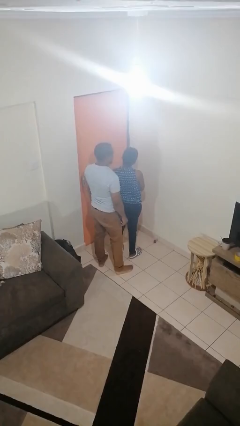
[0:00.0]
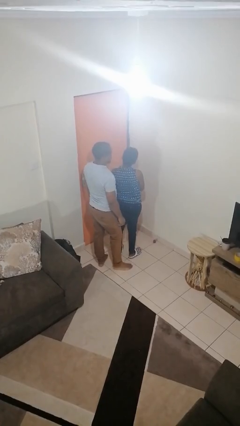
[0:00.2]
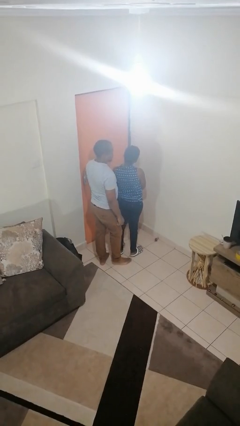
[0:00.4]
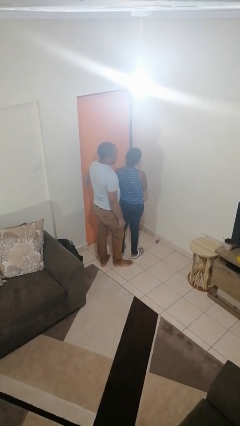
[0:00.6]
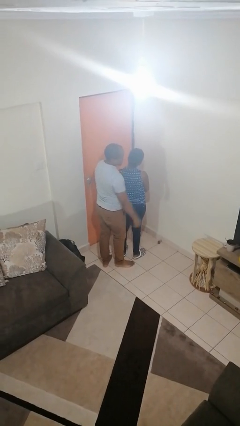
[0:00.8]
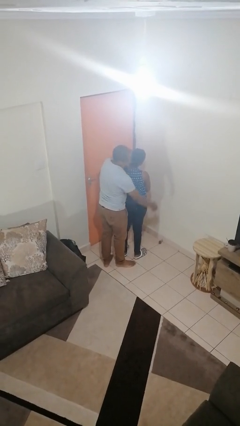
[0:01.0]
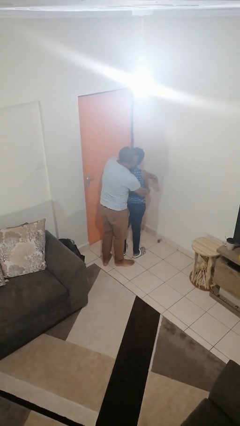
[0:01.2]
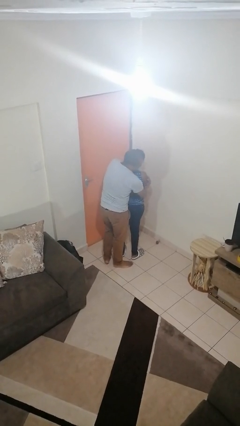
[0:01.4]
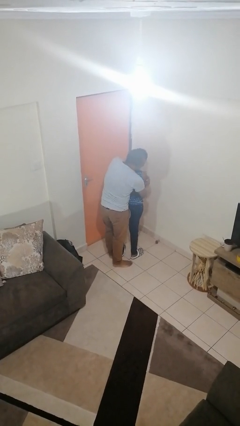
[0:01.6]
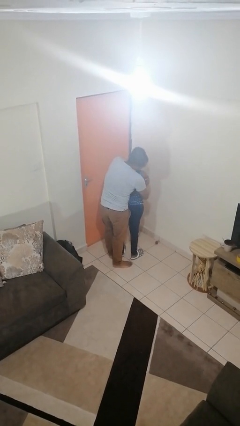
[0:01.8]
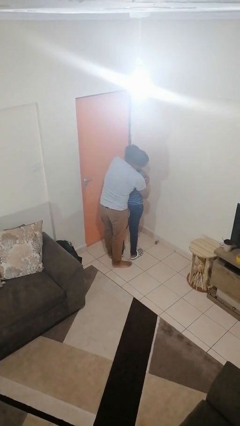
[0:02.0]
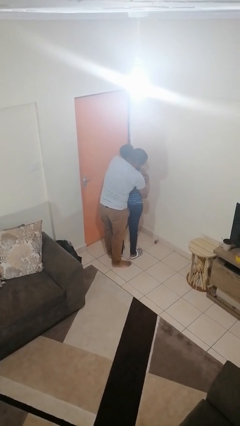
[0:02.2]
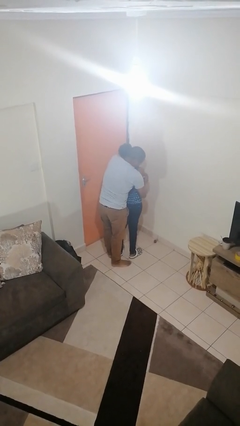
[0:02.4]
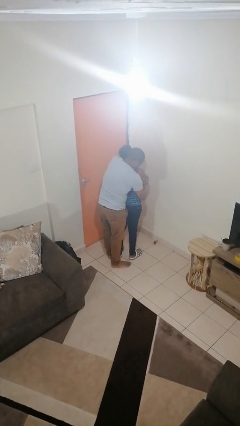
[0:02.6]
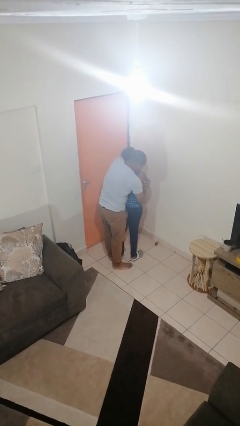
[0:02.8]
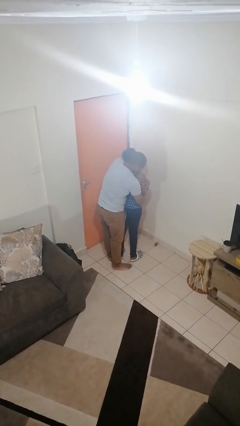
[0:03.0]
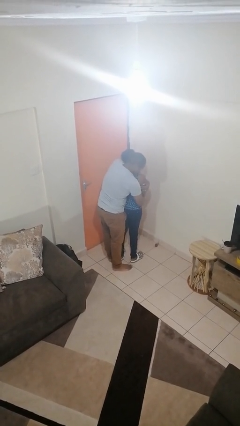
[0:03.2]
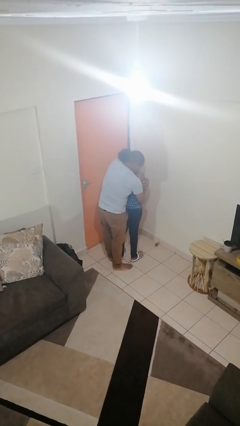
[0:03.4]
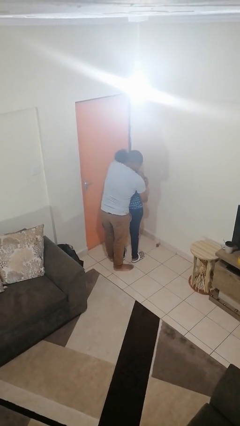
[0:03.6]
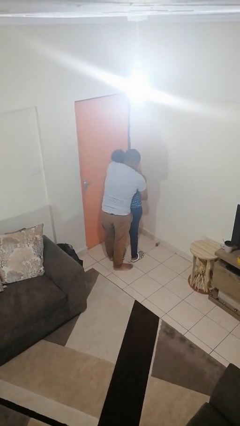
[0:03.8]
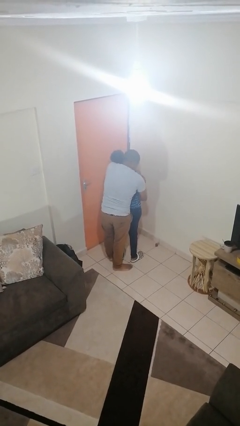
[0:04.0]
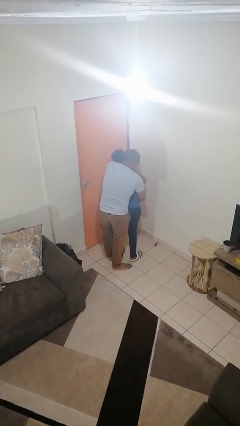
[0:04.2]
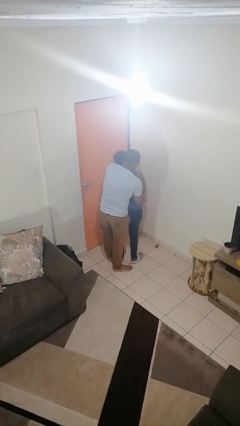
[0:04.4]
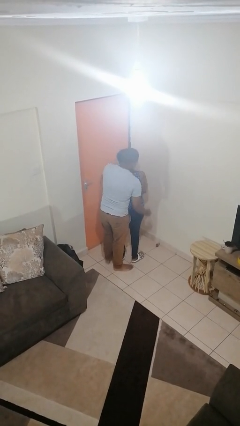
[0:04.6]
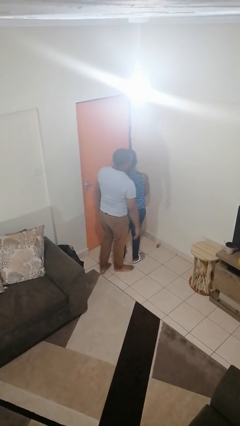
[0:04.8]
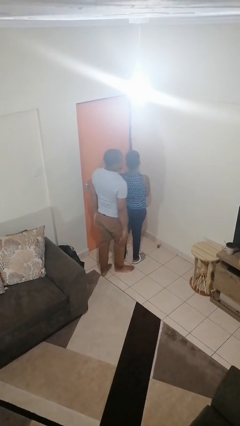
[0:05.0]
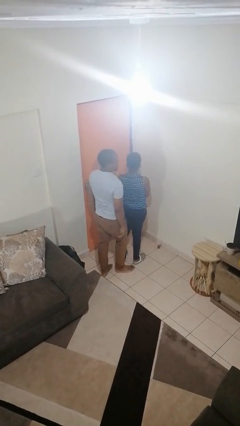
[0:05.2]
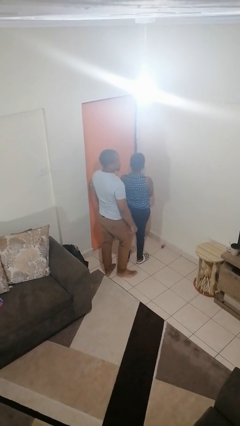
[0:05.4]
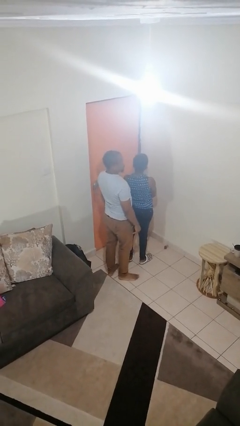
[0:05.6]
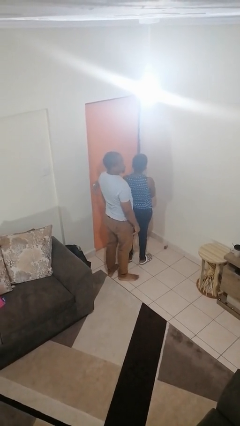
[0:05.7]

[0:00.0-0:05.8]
person hugs person from behind

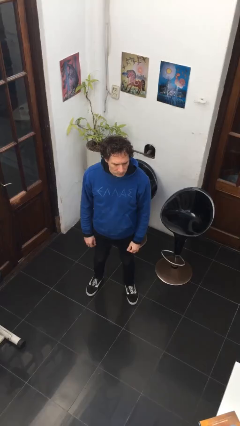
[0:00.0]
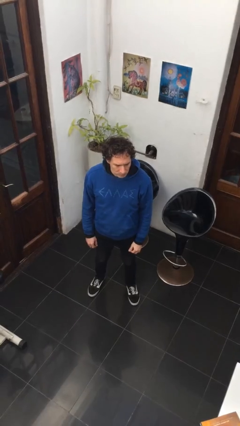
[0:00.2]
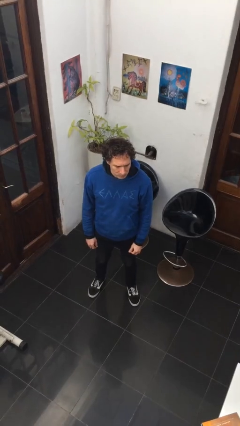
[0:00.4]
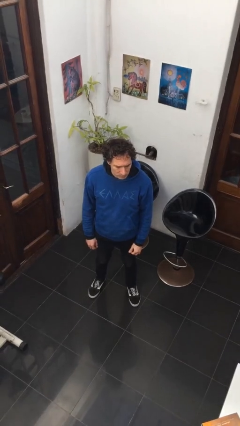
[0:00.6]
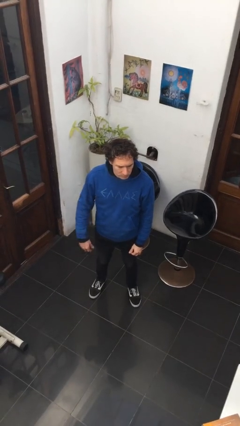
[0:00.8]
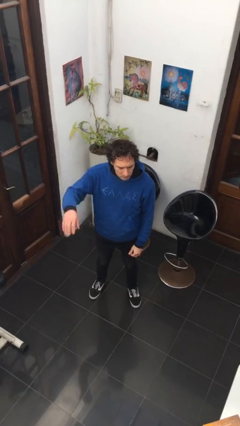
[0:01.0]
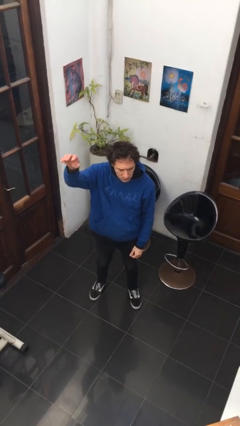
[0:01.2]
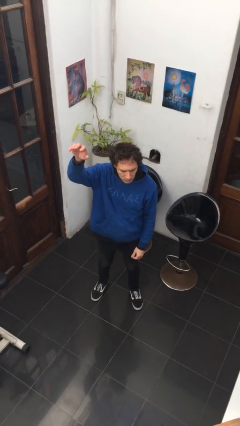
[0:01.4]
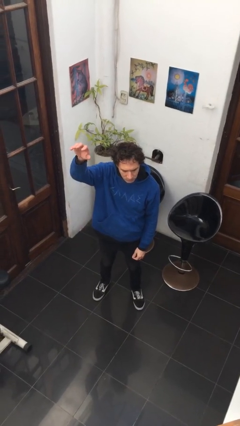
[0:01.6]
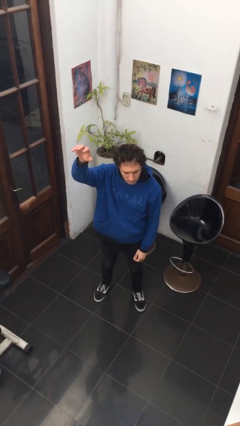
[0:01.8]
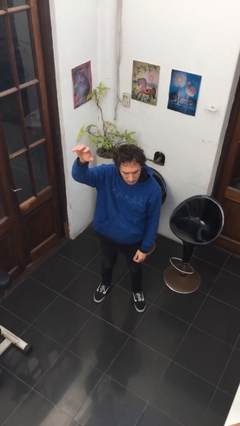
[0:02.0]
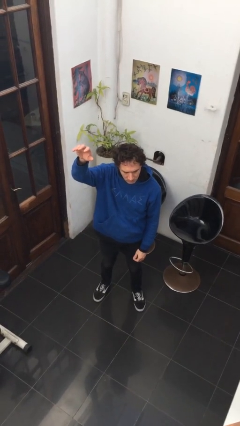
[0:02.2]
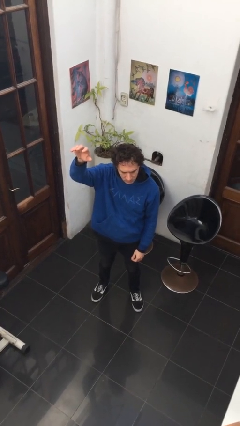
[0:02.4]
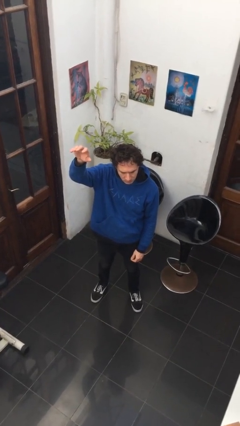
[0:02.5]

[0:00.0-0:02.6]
person gestures swipe up

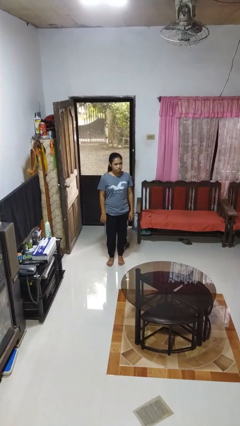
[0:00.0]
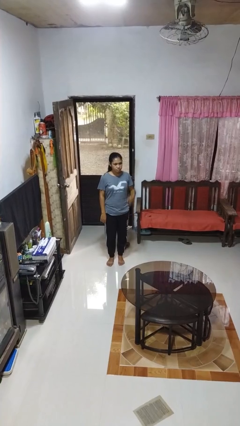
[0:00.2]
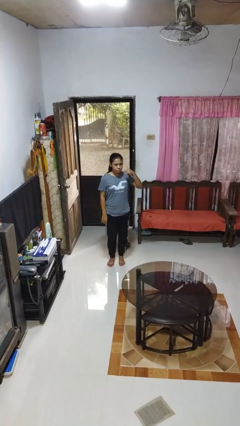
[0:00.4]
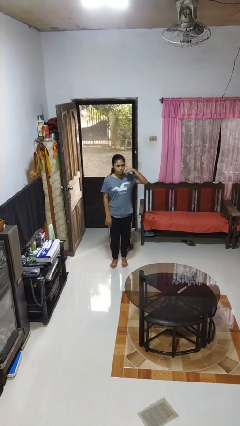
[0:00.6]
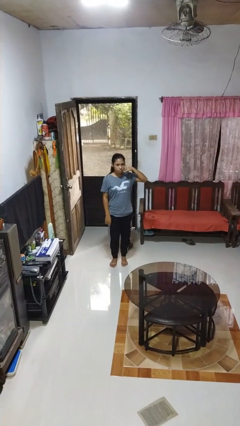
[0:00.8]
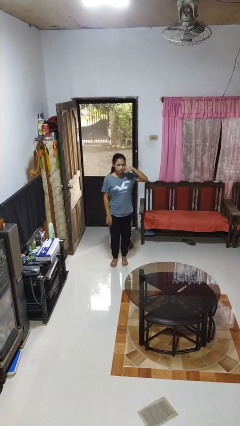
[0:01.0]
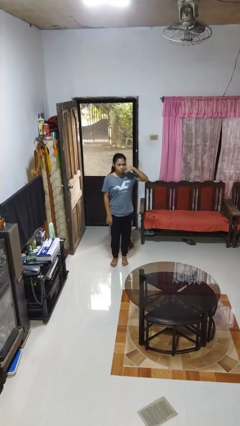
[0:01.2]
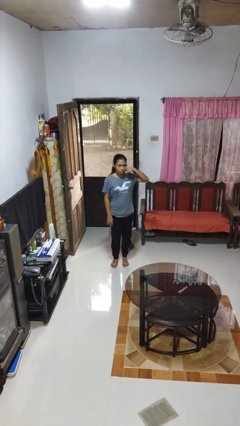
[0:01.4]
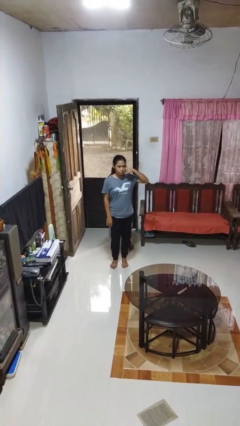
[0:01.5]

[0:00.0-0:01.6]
person gestures call me

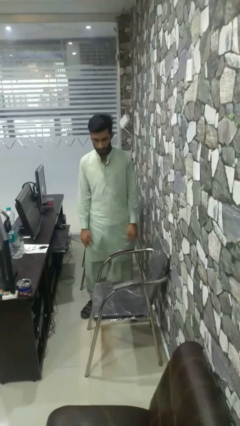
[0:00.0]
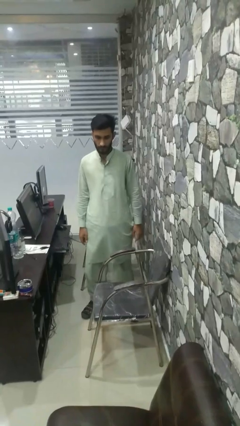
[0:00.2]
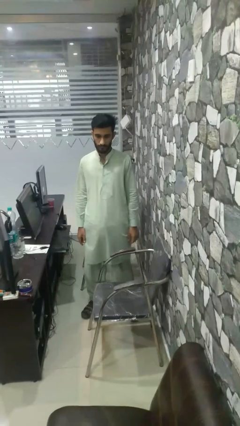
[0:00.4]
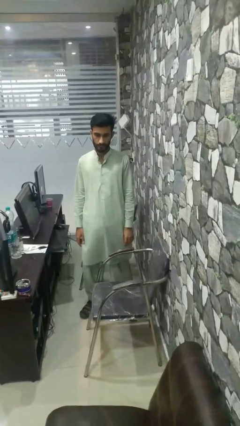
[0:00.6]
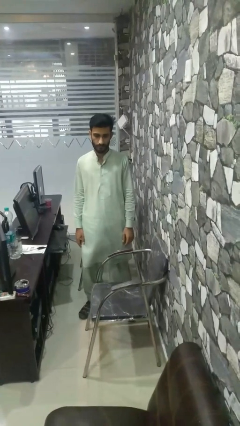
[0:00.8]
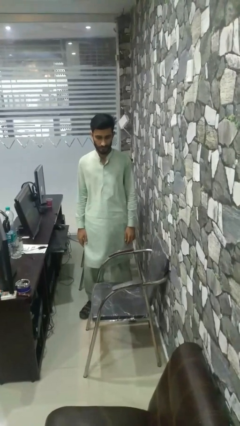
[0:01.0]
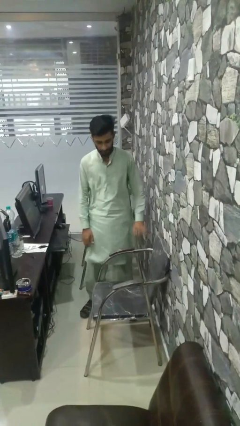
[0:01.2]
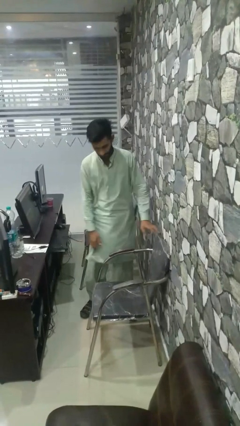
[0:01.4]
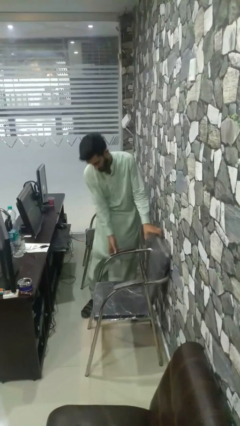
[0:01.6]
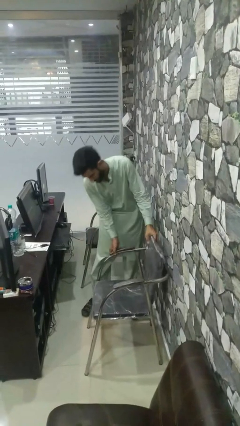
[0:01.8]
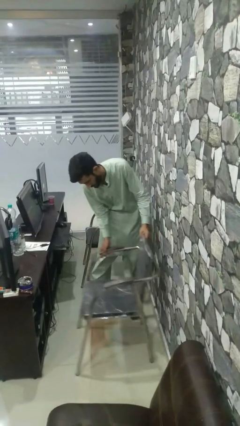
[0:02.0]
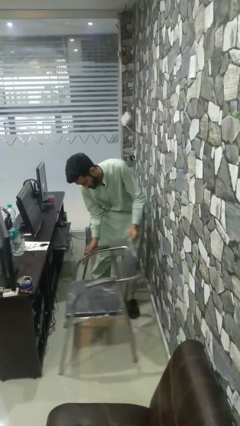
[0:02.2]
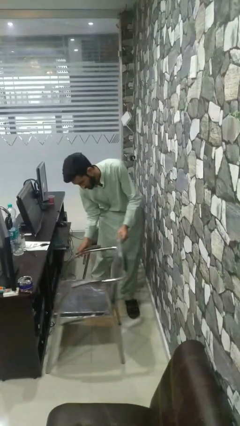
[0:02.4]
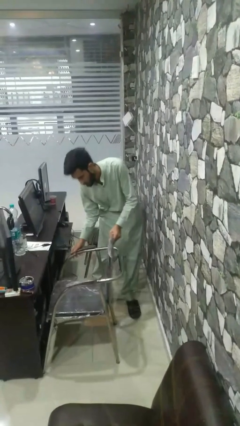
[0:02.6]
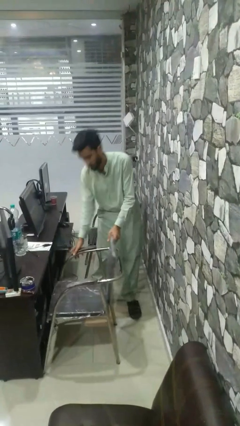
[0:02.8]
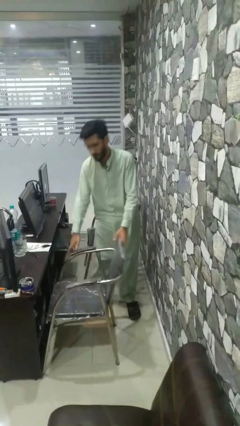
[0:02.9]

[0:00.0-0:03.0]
person pushes in chair

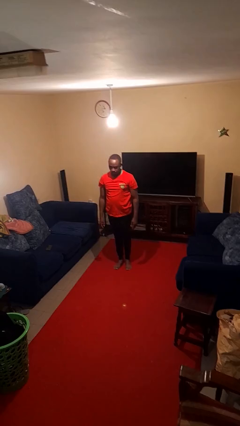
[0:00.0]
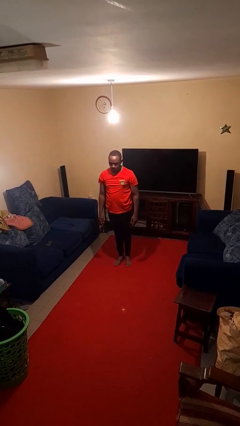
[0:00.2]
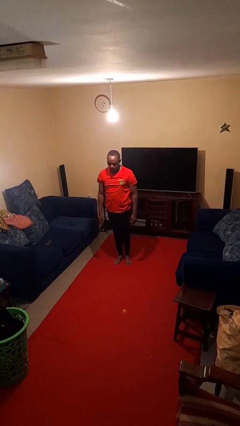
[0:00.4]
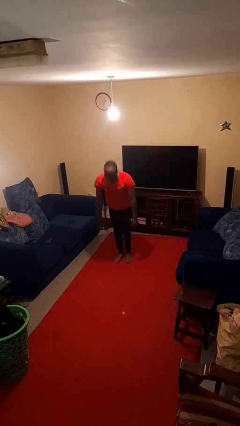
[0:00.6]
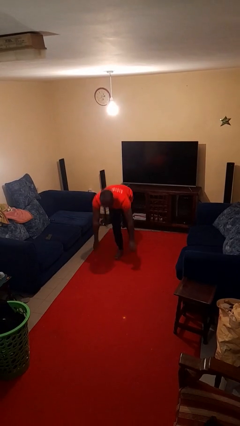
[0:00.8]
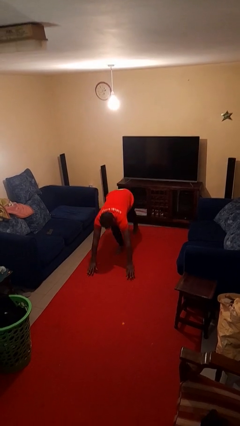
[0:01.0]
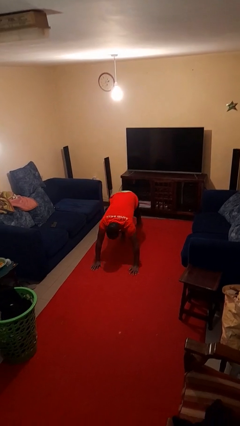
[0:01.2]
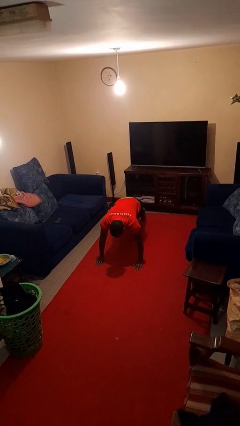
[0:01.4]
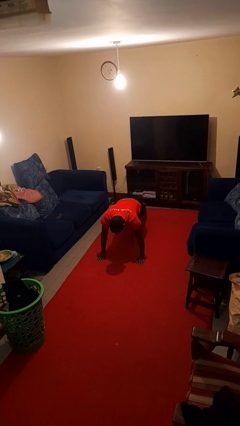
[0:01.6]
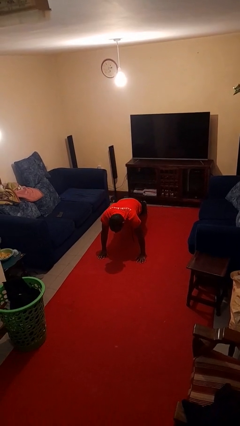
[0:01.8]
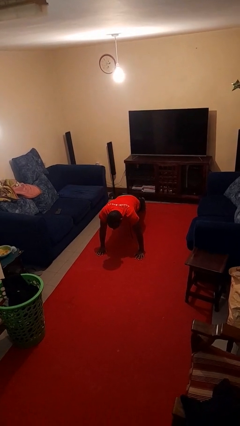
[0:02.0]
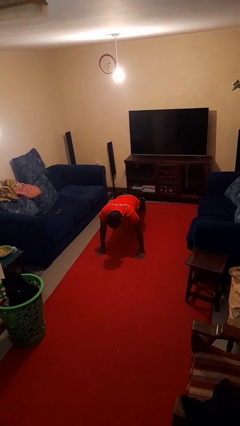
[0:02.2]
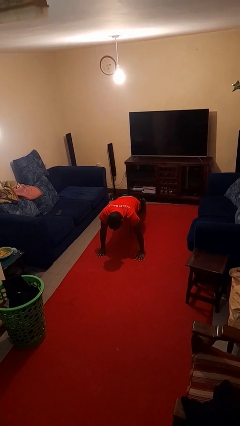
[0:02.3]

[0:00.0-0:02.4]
person exercises with plank

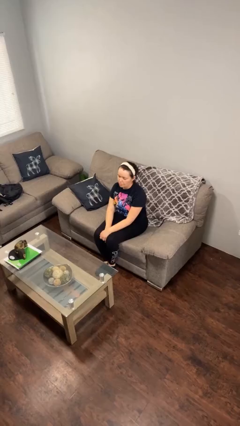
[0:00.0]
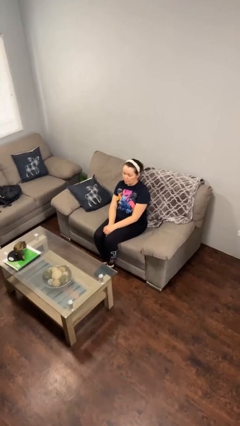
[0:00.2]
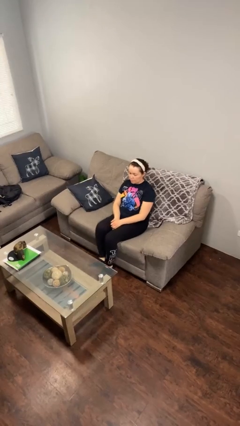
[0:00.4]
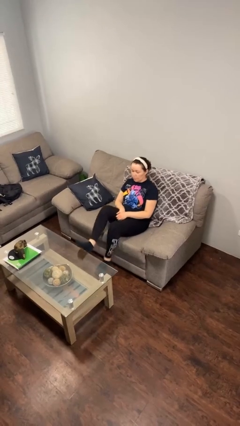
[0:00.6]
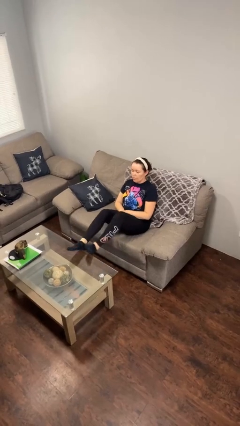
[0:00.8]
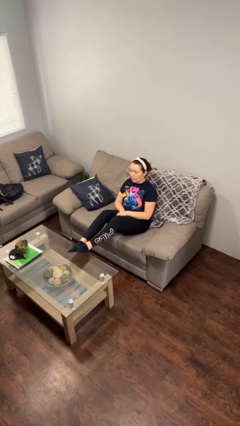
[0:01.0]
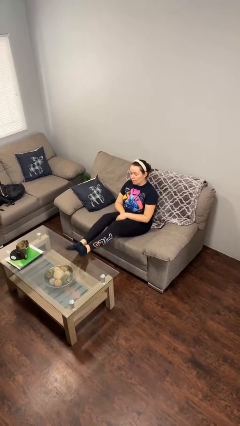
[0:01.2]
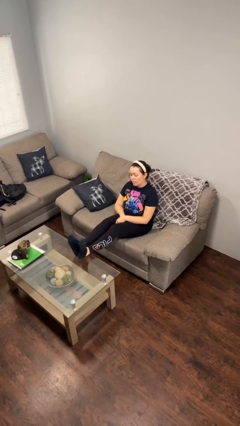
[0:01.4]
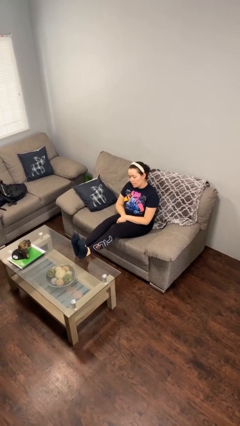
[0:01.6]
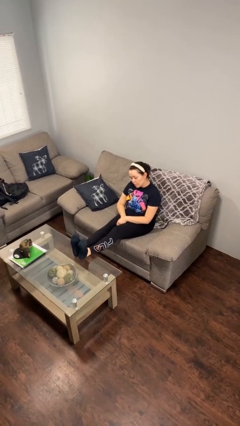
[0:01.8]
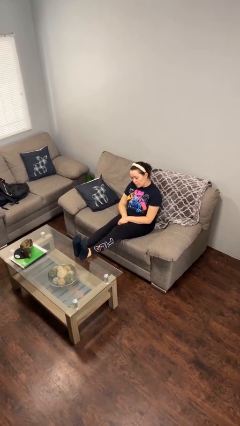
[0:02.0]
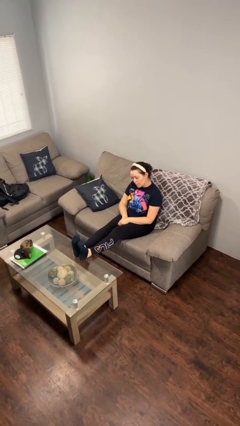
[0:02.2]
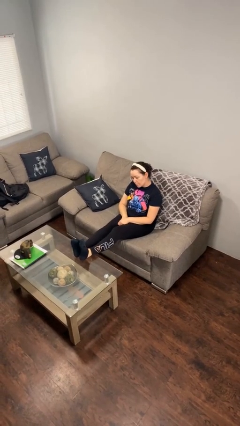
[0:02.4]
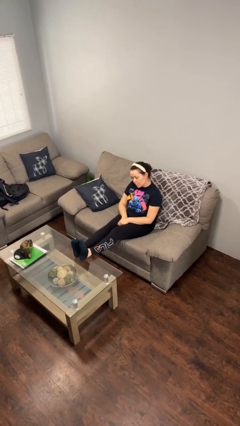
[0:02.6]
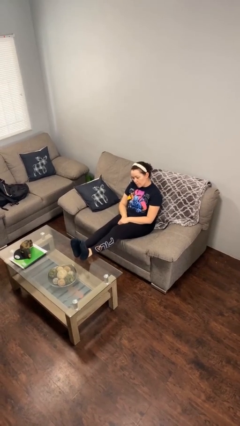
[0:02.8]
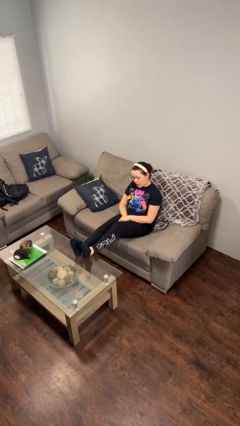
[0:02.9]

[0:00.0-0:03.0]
person puts feet up
